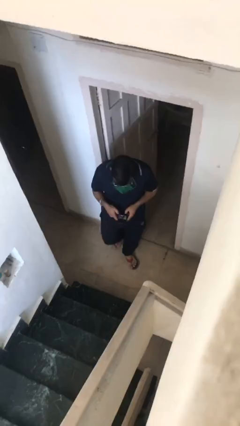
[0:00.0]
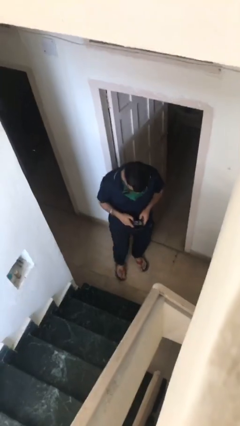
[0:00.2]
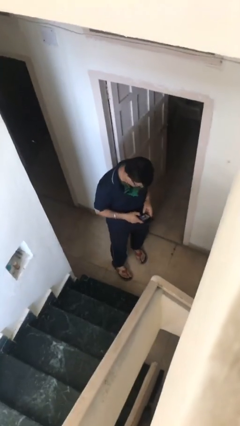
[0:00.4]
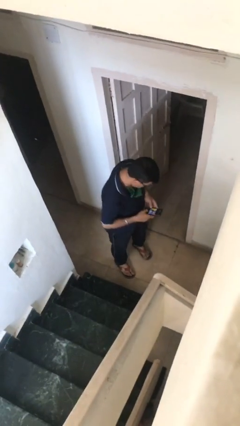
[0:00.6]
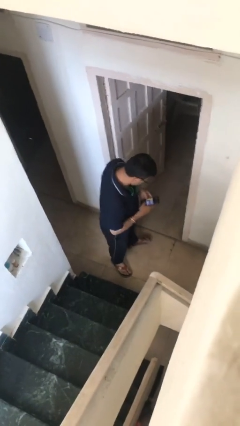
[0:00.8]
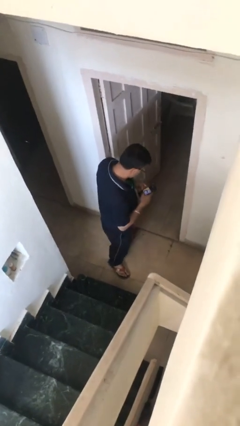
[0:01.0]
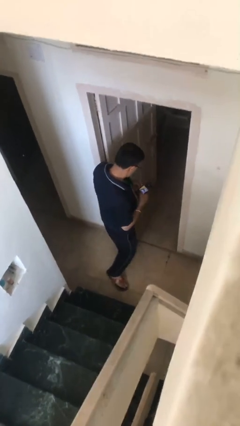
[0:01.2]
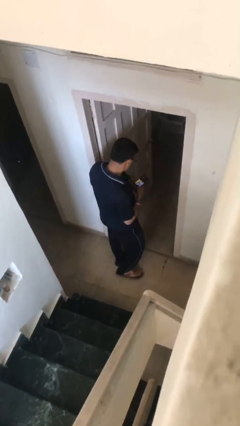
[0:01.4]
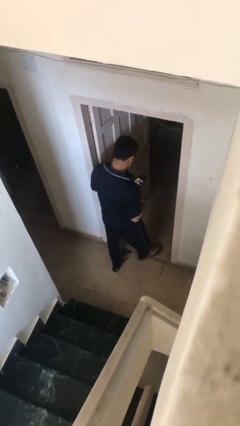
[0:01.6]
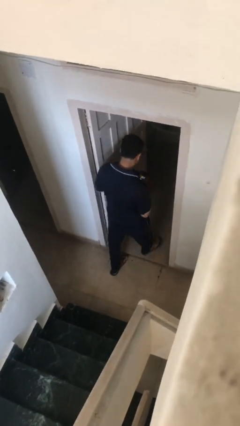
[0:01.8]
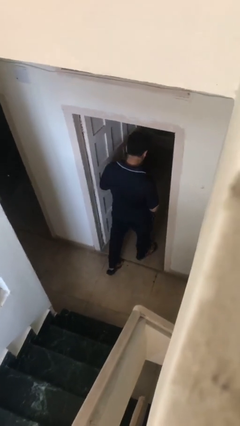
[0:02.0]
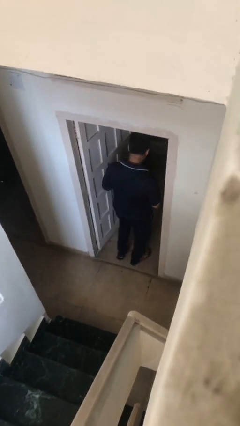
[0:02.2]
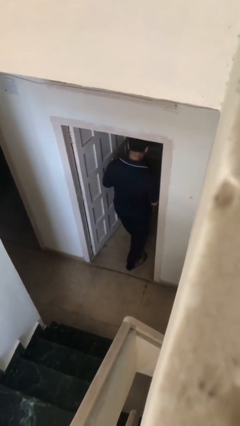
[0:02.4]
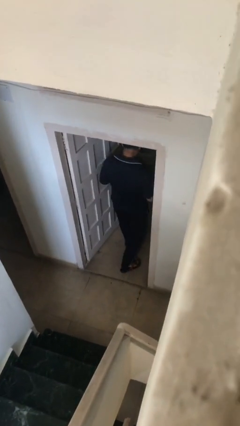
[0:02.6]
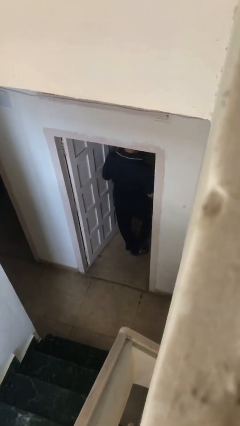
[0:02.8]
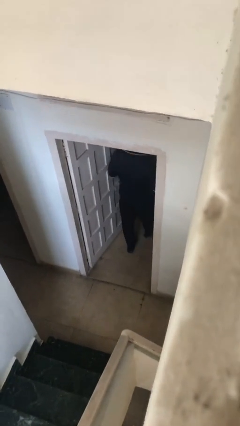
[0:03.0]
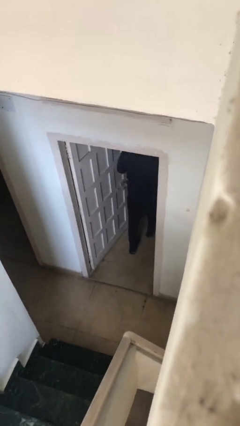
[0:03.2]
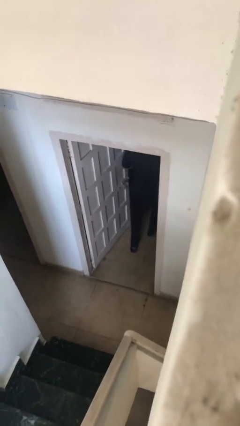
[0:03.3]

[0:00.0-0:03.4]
person exits scene through structure

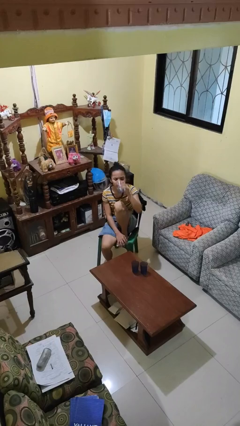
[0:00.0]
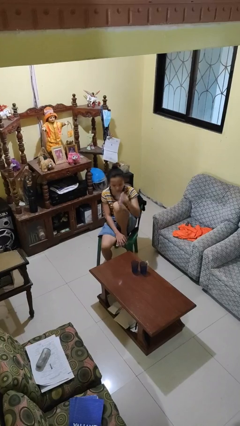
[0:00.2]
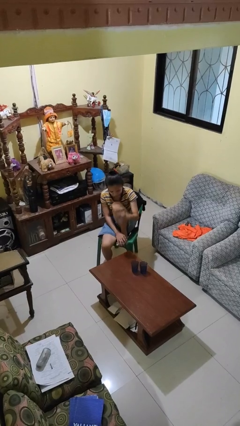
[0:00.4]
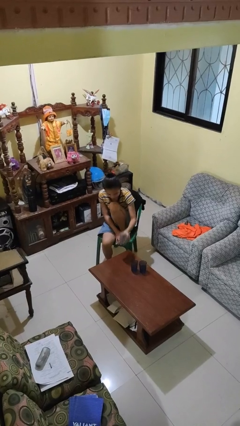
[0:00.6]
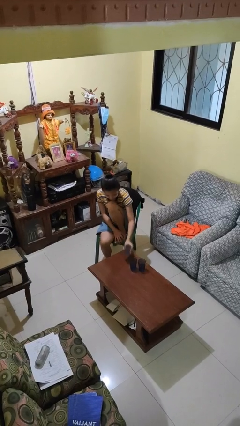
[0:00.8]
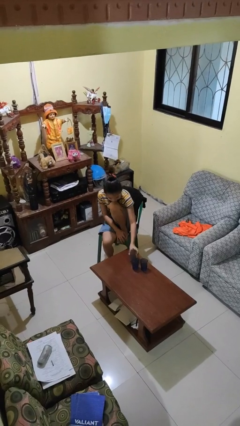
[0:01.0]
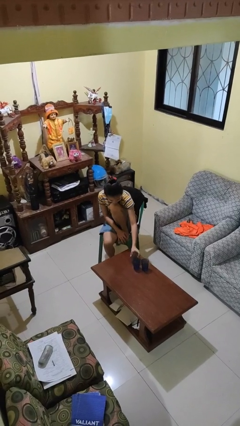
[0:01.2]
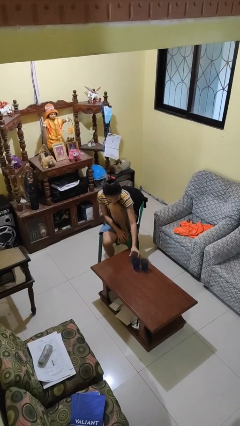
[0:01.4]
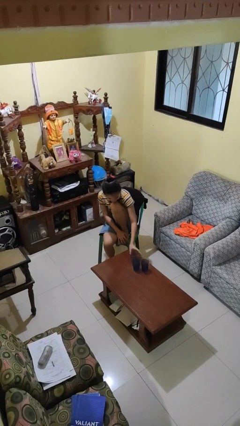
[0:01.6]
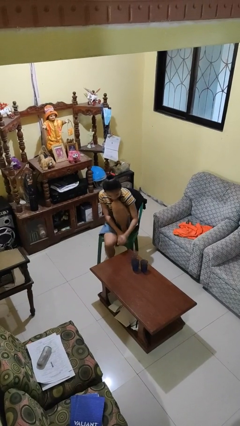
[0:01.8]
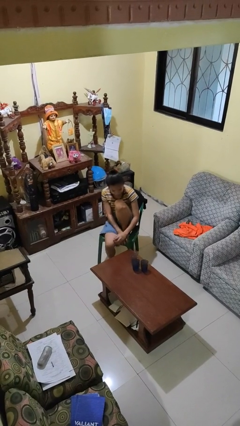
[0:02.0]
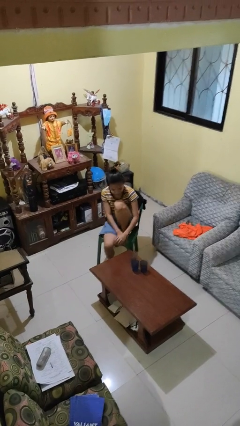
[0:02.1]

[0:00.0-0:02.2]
person puts down object on table

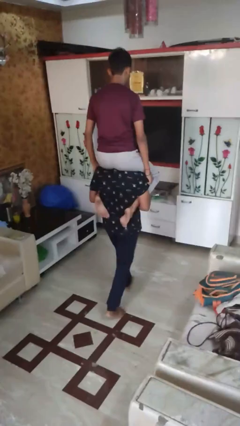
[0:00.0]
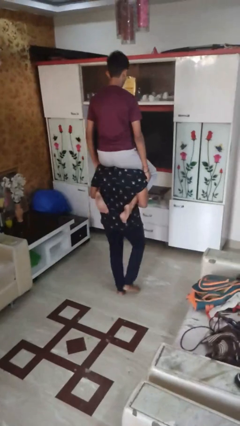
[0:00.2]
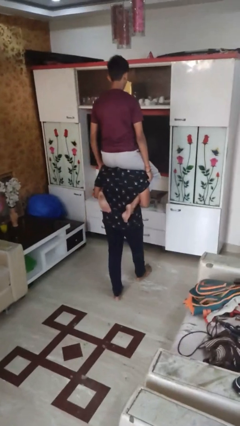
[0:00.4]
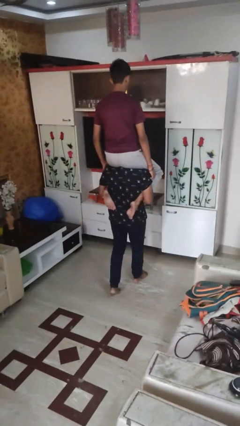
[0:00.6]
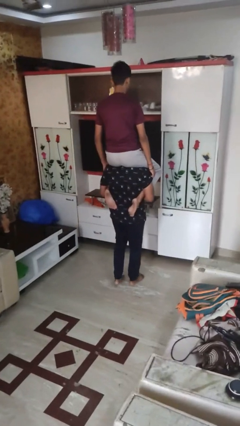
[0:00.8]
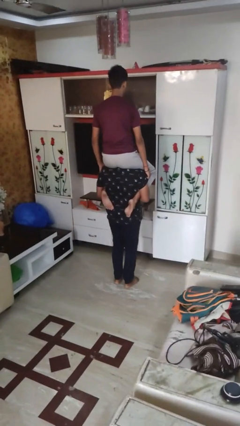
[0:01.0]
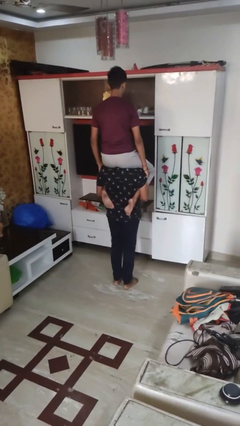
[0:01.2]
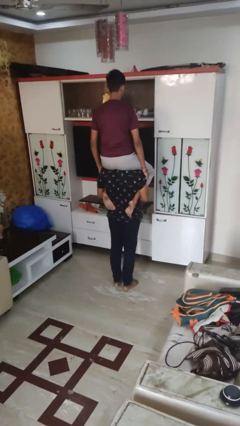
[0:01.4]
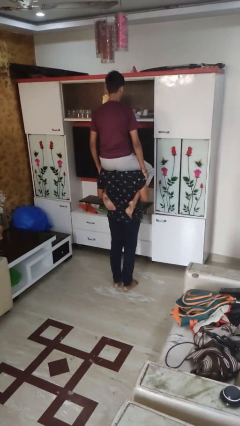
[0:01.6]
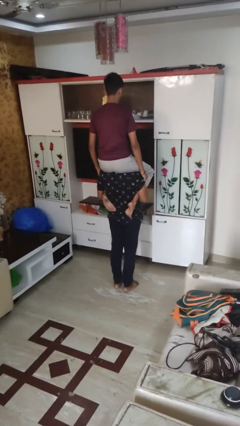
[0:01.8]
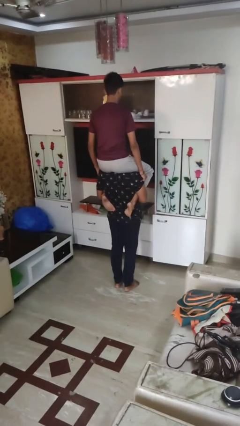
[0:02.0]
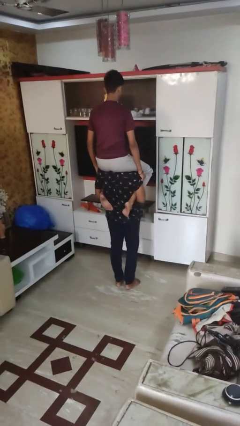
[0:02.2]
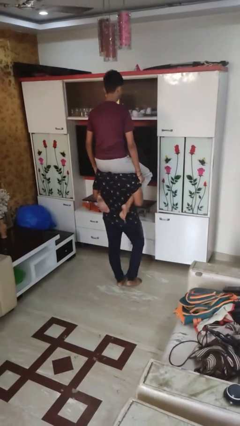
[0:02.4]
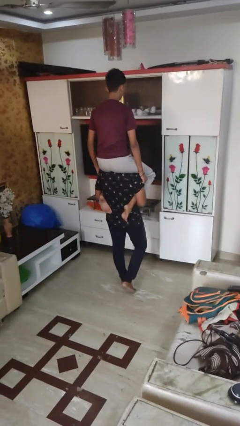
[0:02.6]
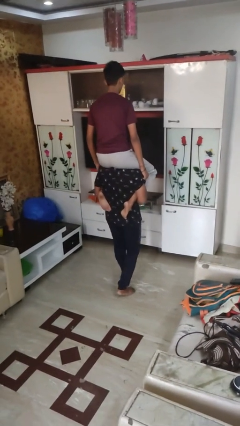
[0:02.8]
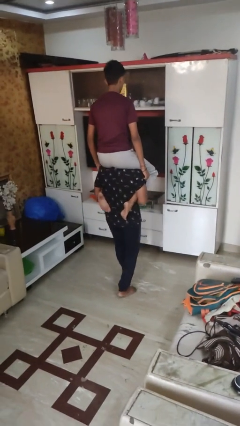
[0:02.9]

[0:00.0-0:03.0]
person carries person on shoulders

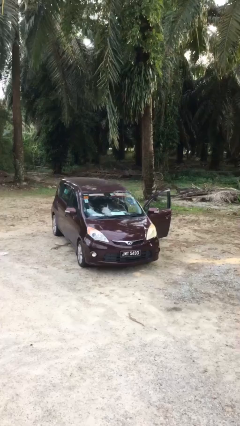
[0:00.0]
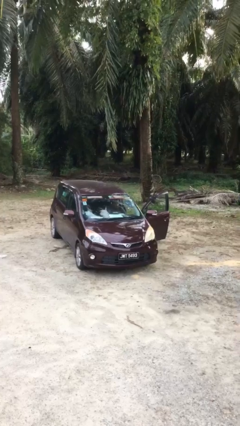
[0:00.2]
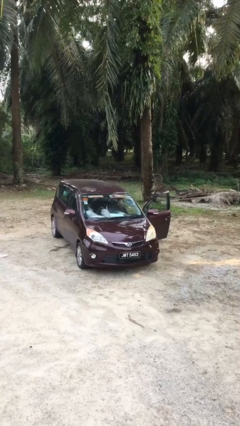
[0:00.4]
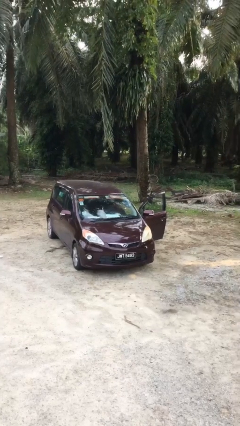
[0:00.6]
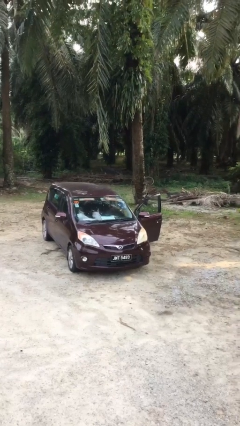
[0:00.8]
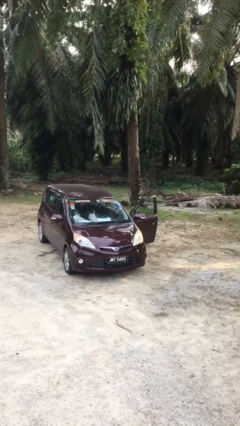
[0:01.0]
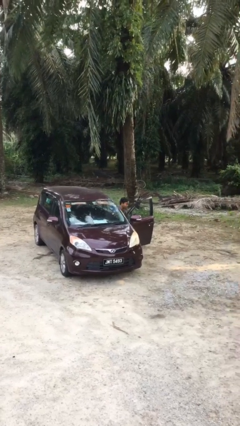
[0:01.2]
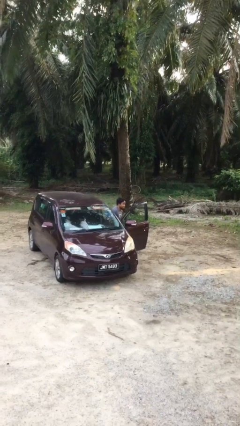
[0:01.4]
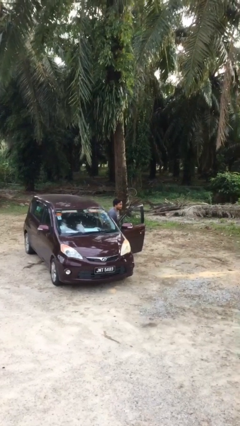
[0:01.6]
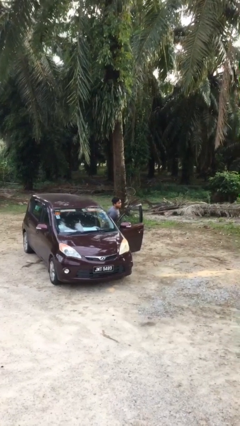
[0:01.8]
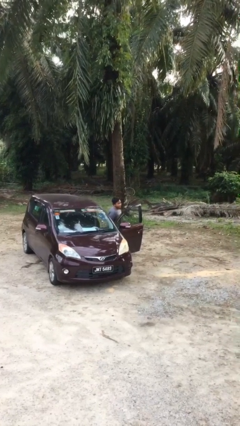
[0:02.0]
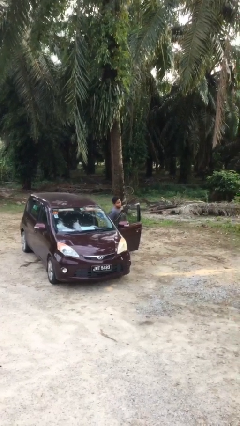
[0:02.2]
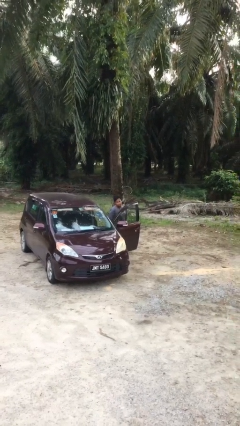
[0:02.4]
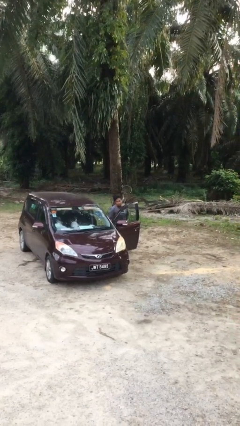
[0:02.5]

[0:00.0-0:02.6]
person exits car

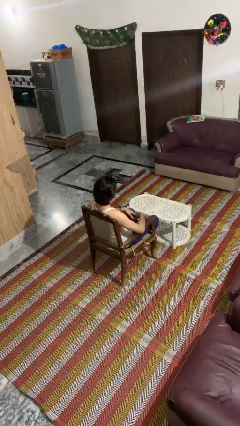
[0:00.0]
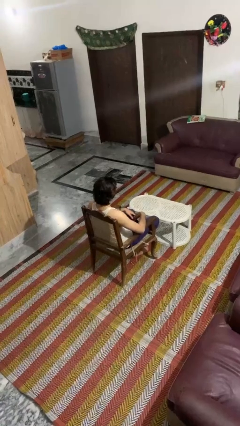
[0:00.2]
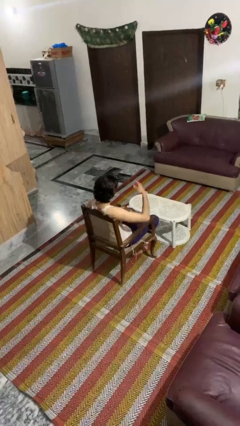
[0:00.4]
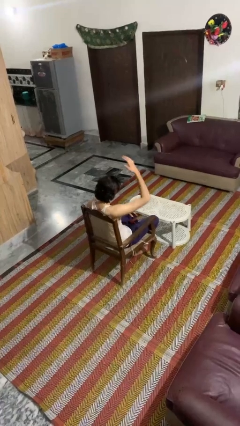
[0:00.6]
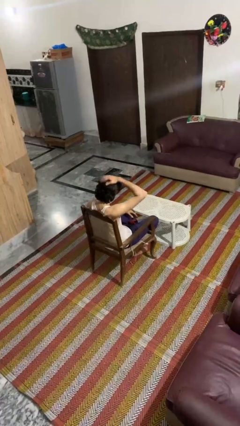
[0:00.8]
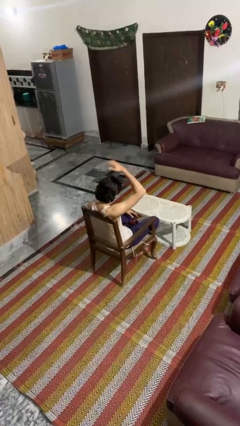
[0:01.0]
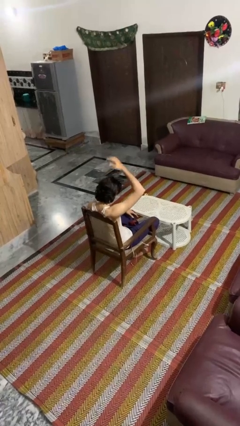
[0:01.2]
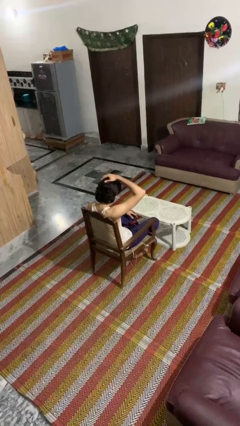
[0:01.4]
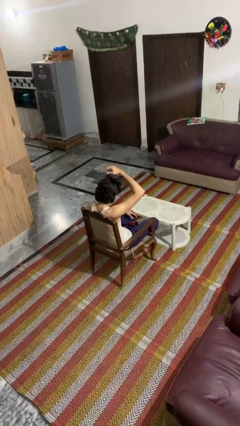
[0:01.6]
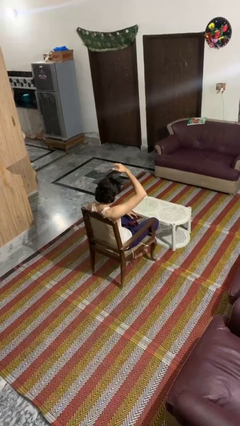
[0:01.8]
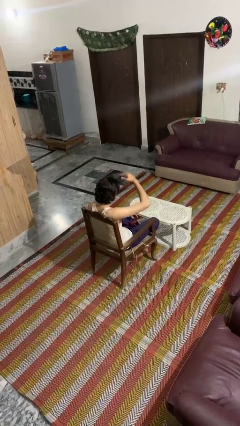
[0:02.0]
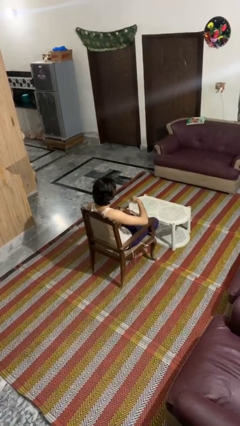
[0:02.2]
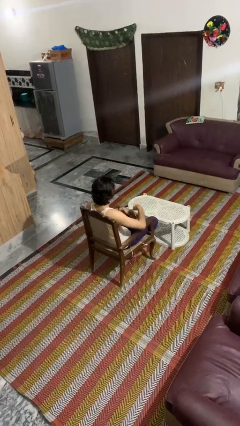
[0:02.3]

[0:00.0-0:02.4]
person pats head

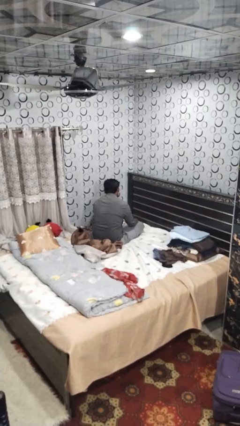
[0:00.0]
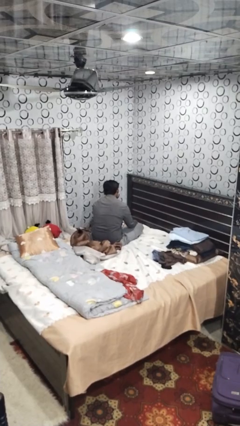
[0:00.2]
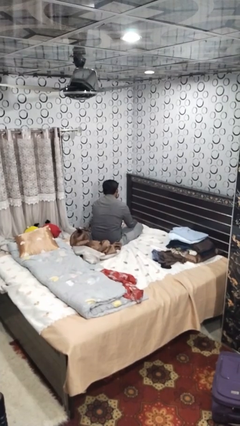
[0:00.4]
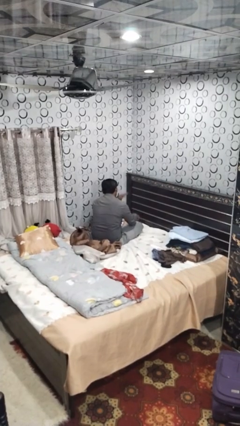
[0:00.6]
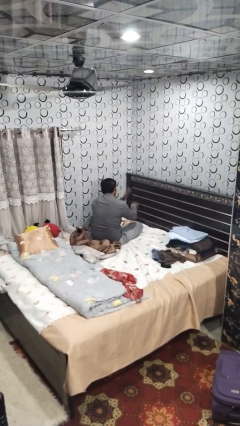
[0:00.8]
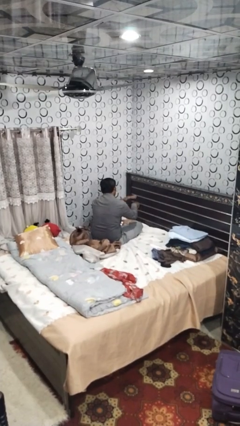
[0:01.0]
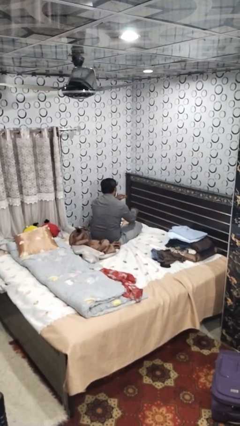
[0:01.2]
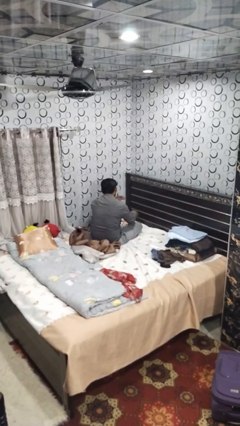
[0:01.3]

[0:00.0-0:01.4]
person swats bug

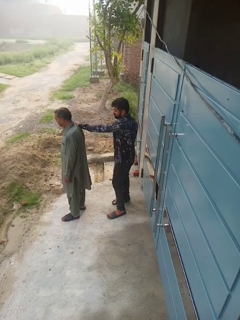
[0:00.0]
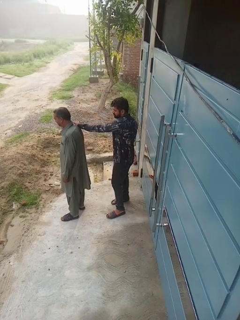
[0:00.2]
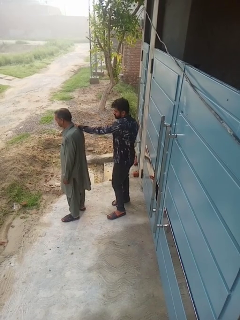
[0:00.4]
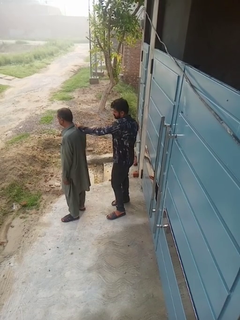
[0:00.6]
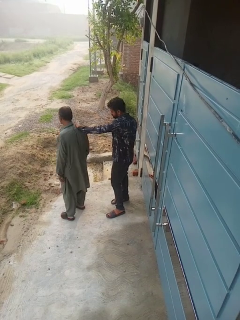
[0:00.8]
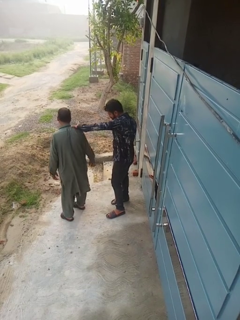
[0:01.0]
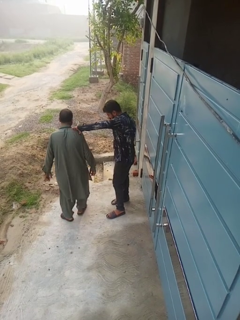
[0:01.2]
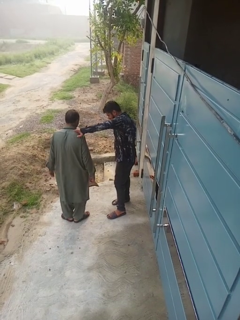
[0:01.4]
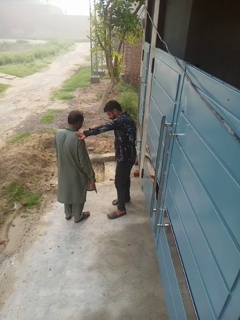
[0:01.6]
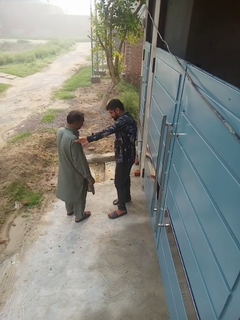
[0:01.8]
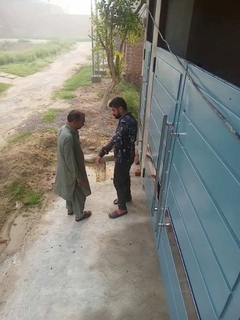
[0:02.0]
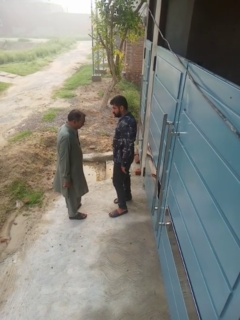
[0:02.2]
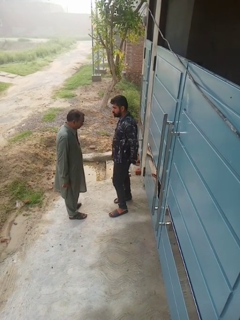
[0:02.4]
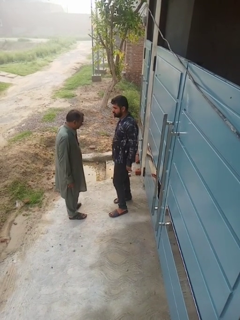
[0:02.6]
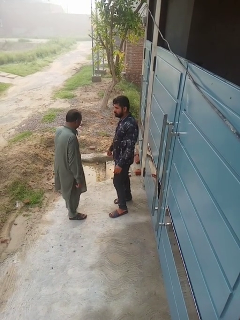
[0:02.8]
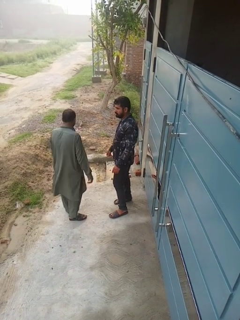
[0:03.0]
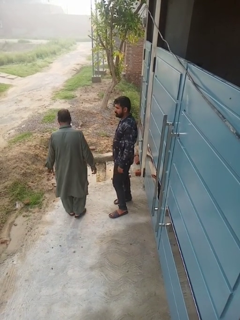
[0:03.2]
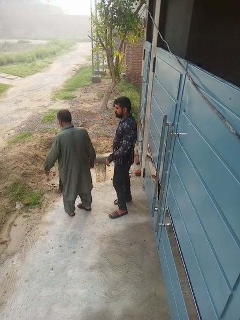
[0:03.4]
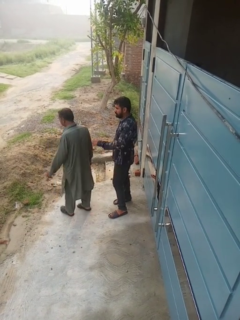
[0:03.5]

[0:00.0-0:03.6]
person spins person around
